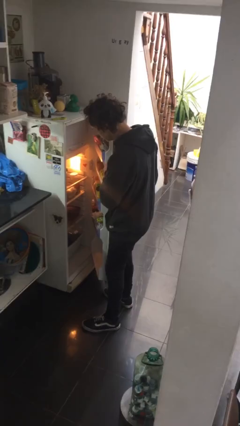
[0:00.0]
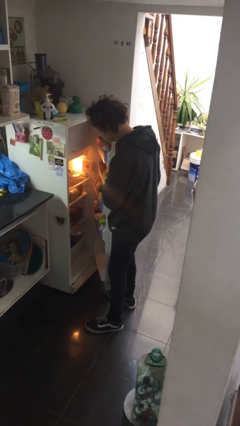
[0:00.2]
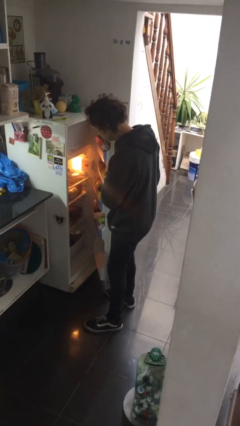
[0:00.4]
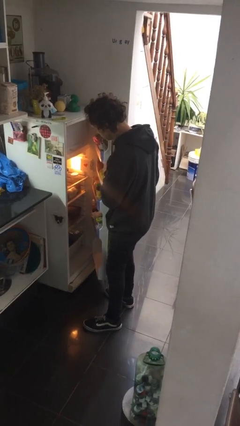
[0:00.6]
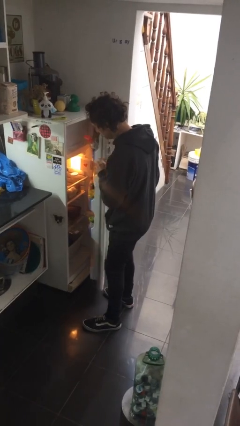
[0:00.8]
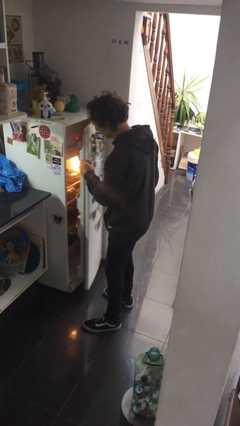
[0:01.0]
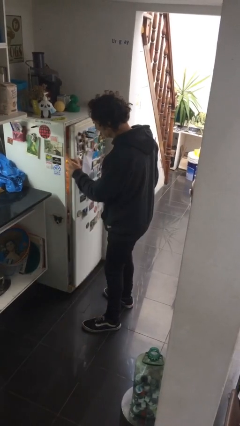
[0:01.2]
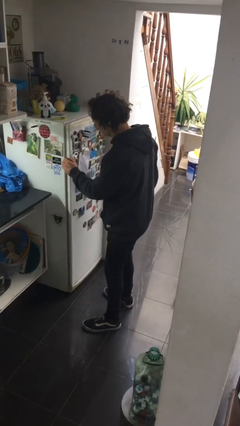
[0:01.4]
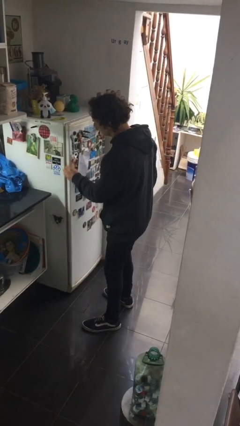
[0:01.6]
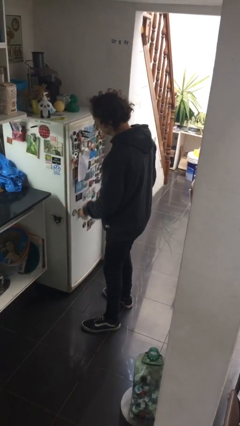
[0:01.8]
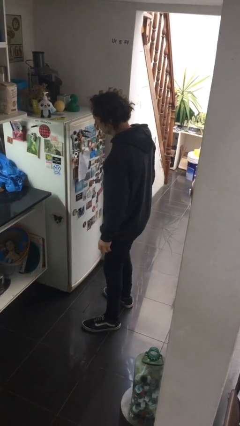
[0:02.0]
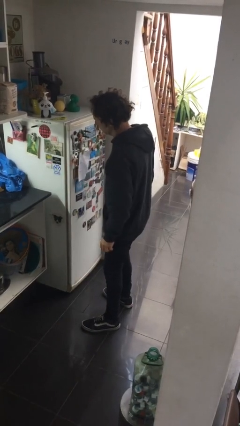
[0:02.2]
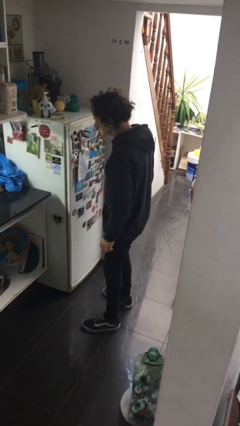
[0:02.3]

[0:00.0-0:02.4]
person closes refrigerator

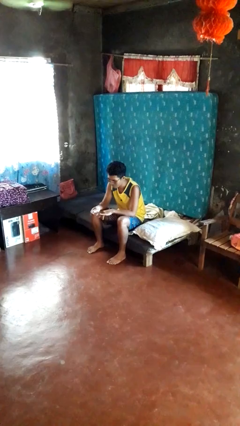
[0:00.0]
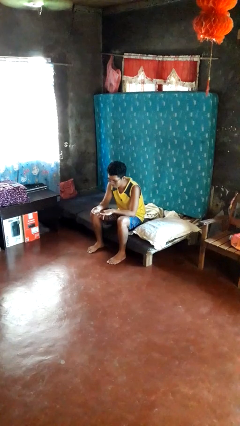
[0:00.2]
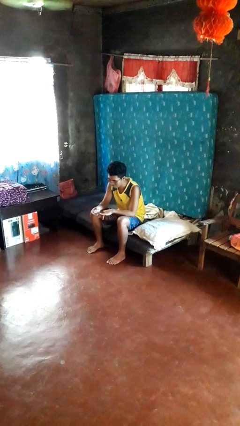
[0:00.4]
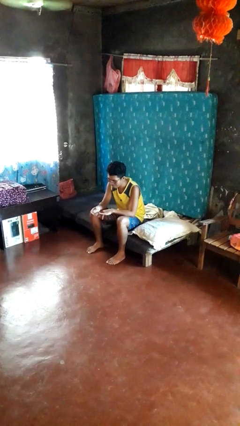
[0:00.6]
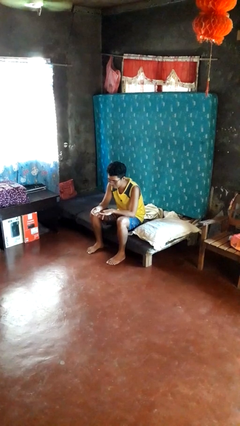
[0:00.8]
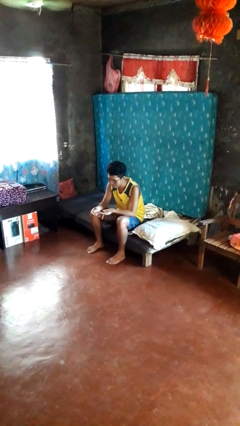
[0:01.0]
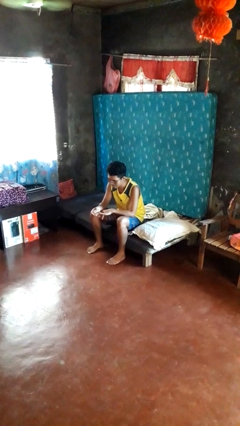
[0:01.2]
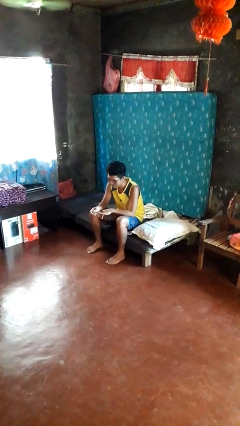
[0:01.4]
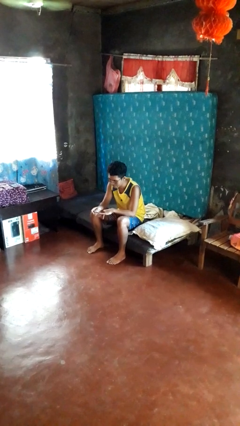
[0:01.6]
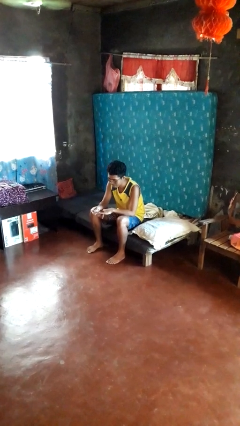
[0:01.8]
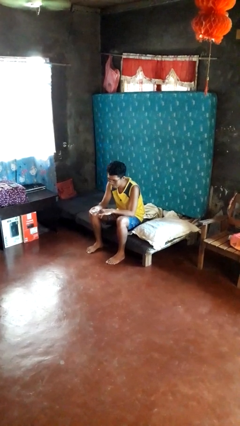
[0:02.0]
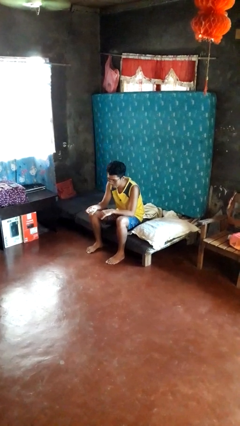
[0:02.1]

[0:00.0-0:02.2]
person clips fingernails

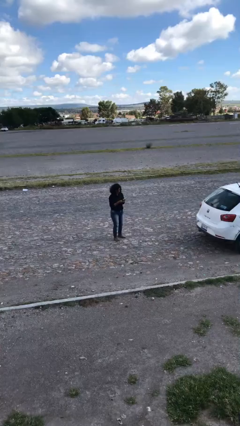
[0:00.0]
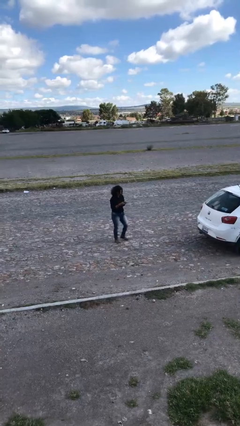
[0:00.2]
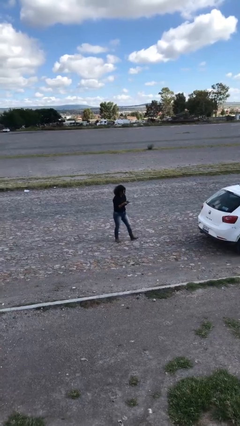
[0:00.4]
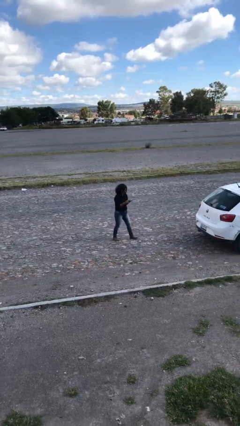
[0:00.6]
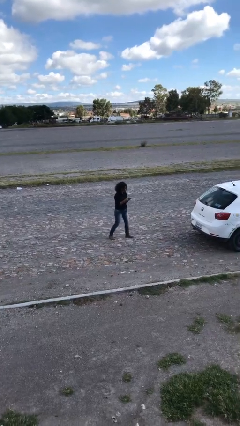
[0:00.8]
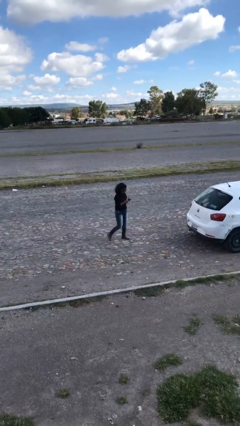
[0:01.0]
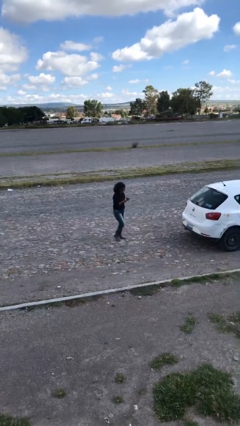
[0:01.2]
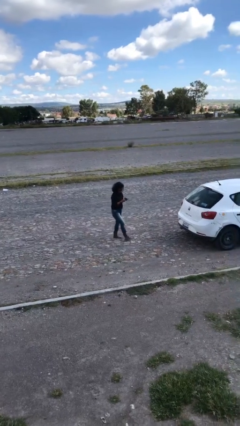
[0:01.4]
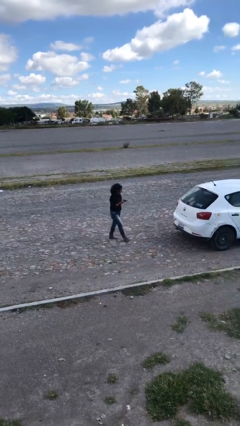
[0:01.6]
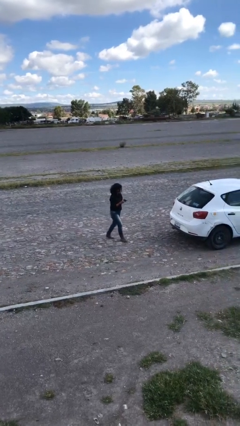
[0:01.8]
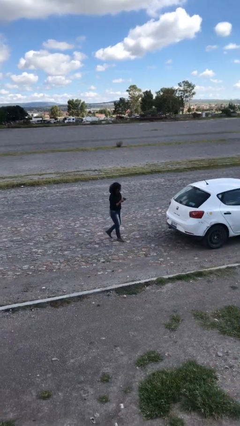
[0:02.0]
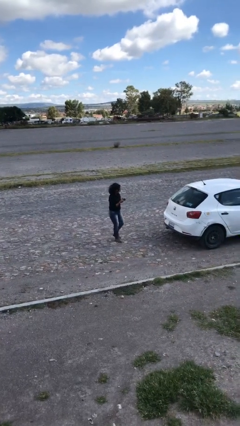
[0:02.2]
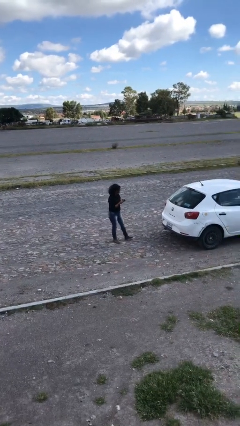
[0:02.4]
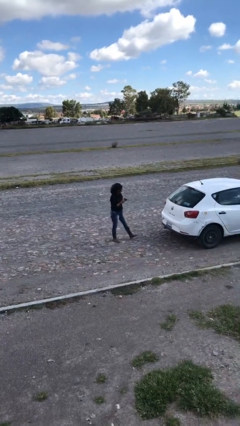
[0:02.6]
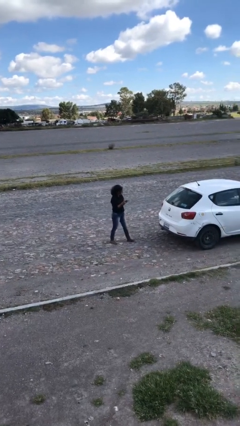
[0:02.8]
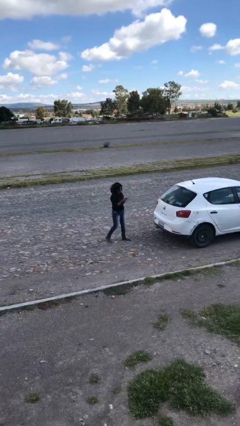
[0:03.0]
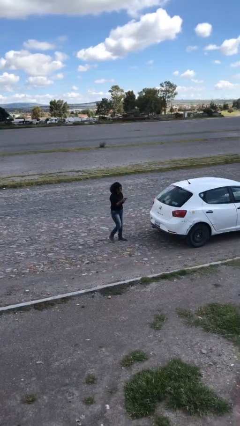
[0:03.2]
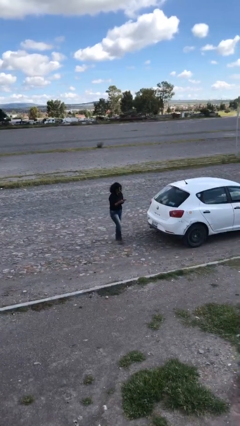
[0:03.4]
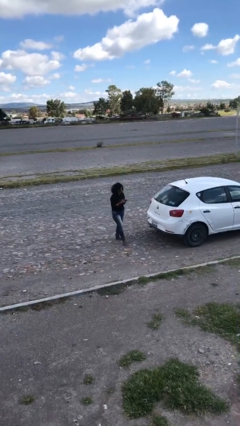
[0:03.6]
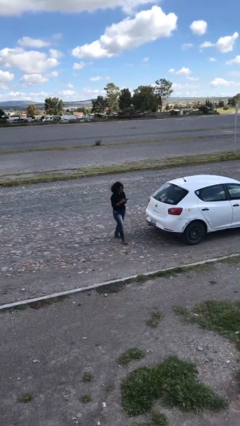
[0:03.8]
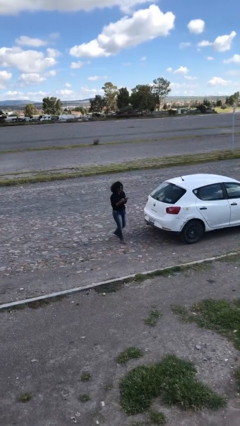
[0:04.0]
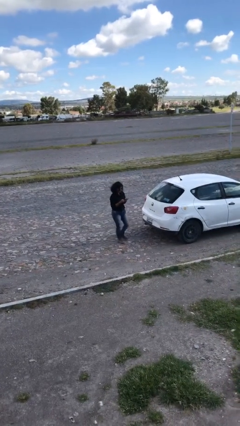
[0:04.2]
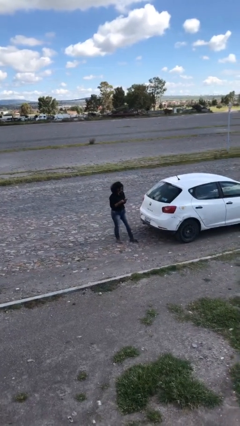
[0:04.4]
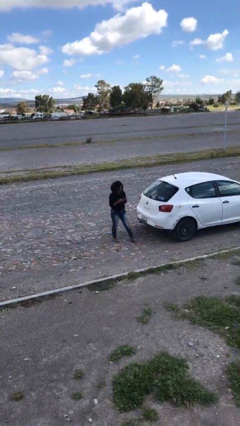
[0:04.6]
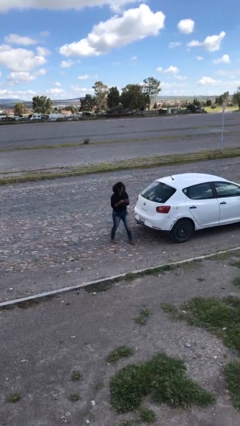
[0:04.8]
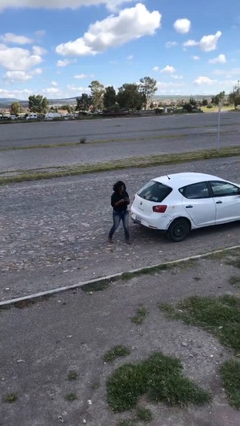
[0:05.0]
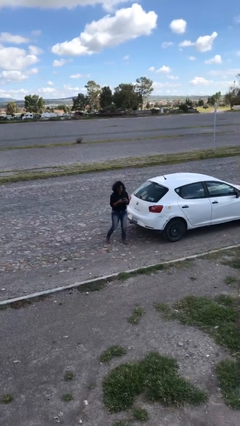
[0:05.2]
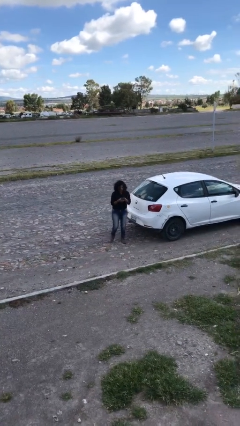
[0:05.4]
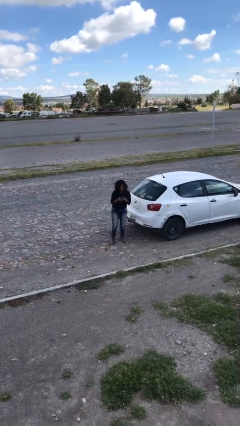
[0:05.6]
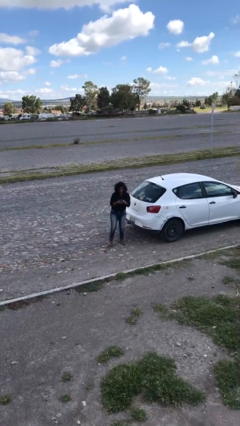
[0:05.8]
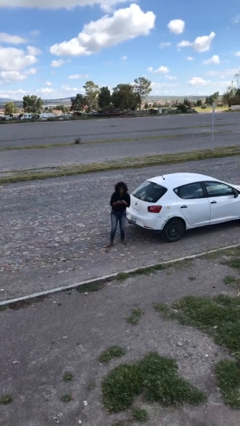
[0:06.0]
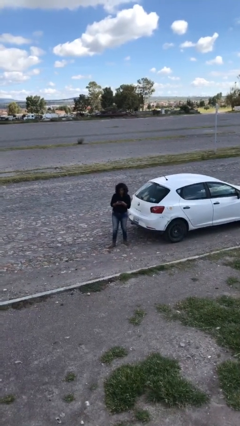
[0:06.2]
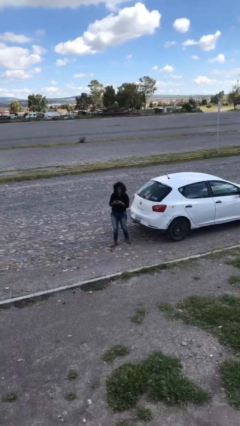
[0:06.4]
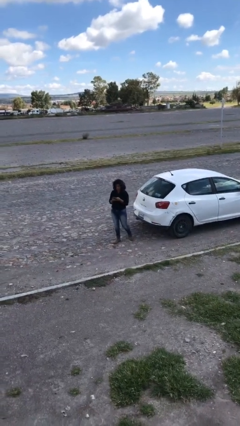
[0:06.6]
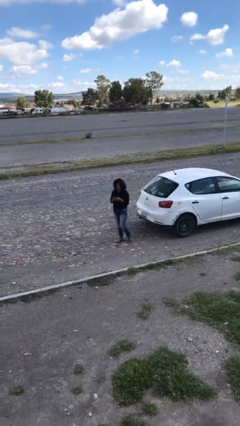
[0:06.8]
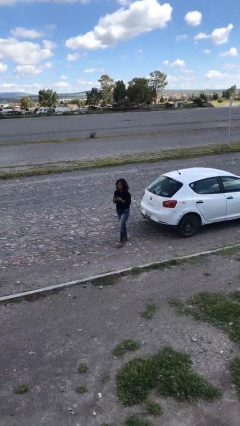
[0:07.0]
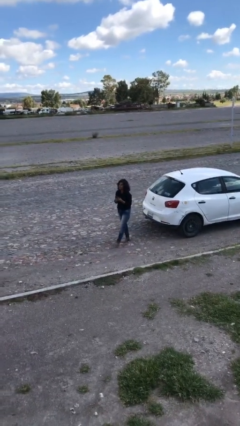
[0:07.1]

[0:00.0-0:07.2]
person texts on phone

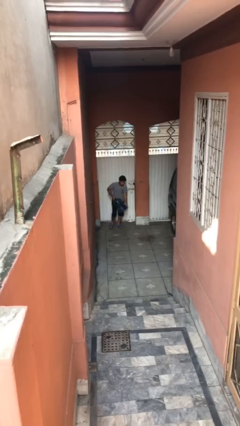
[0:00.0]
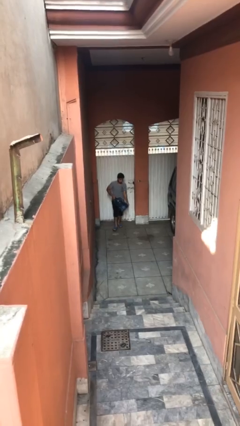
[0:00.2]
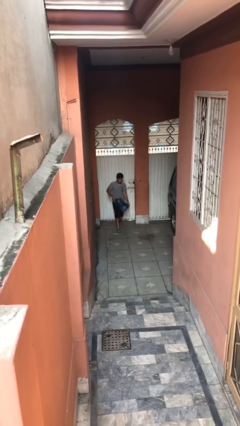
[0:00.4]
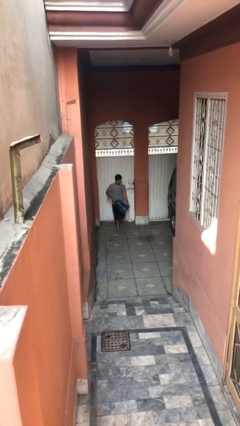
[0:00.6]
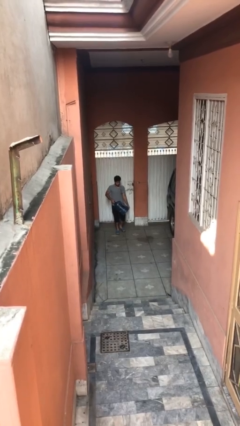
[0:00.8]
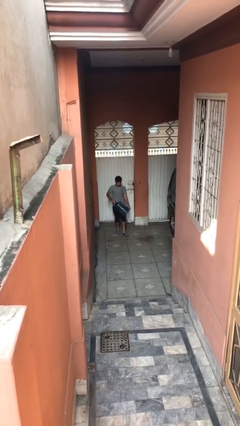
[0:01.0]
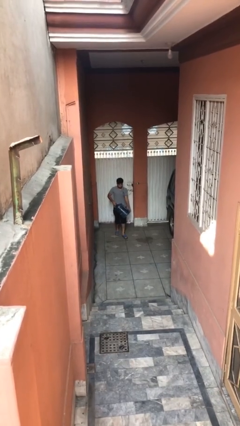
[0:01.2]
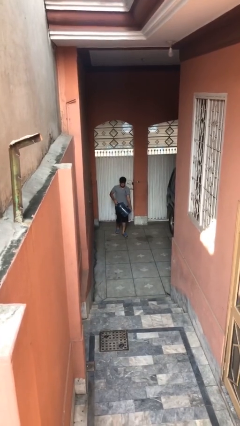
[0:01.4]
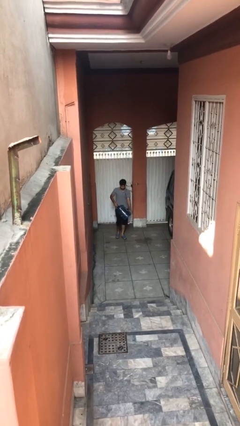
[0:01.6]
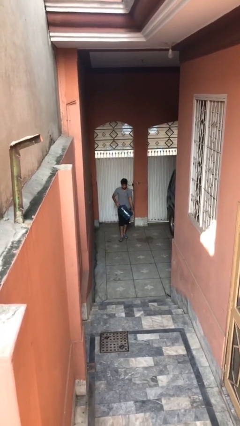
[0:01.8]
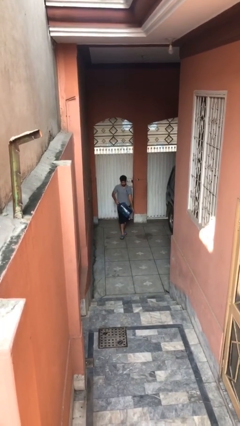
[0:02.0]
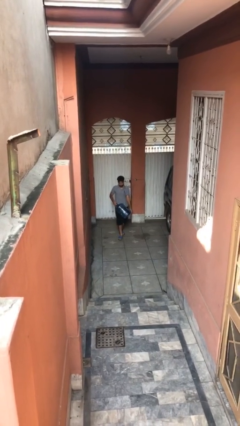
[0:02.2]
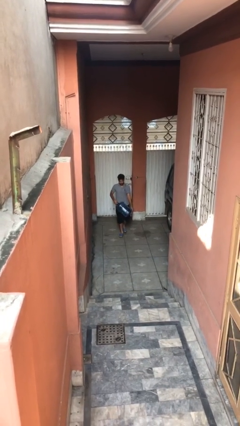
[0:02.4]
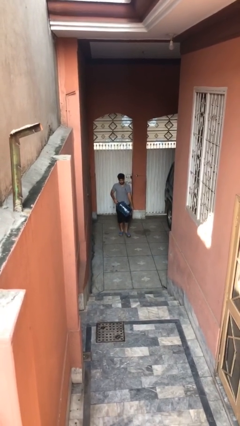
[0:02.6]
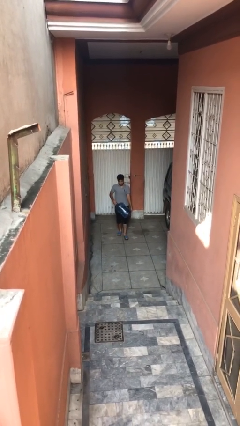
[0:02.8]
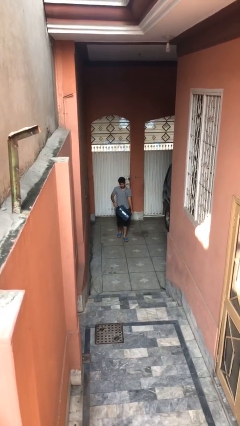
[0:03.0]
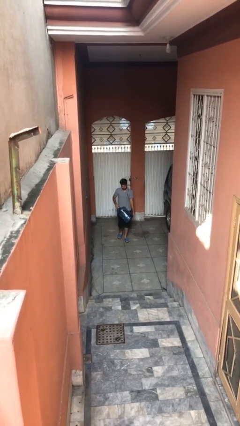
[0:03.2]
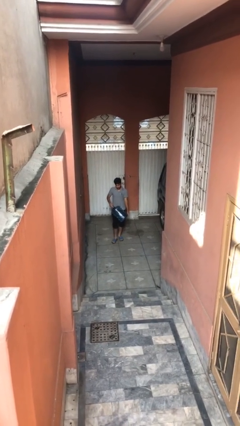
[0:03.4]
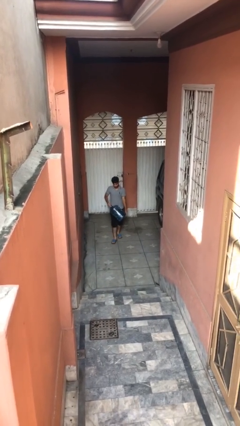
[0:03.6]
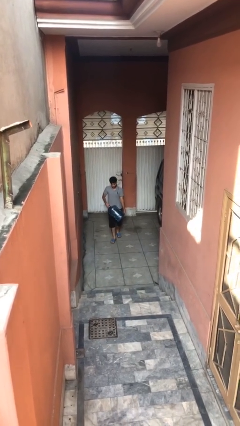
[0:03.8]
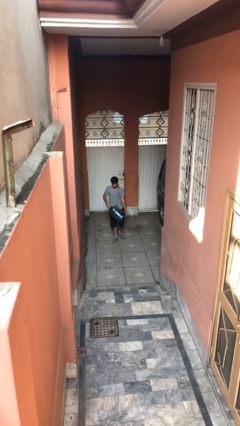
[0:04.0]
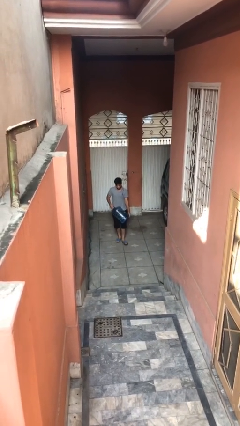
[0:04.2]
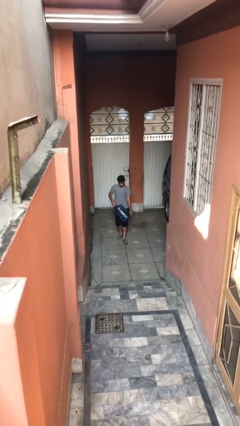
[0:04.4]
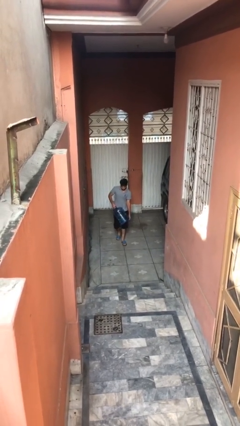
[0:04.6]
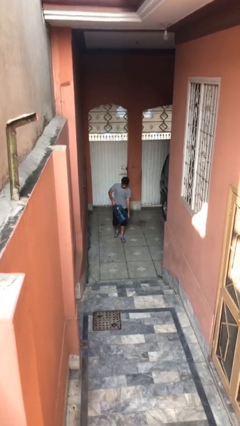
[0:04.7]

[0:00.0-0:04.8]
person carries heavy object

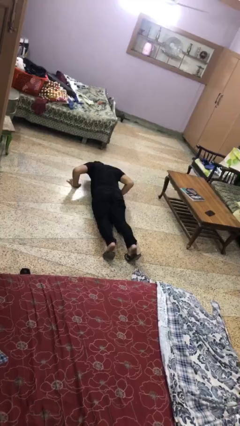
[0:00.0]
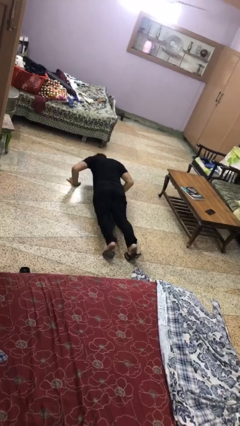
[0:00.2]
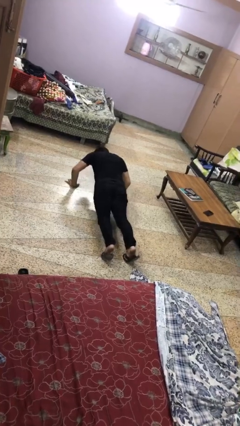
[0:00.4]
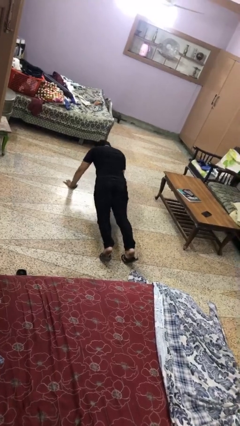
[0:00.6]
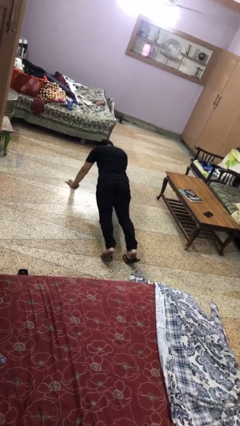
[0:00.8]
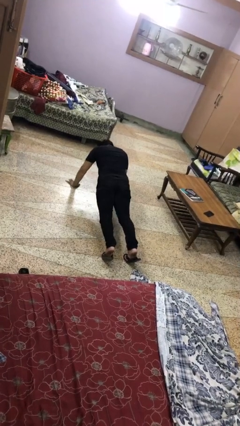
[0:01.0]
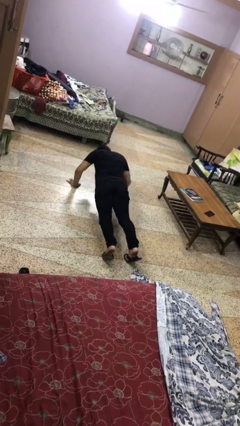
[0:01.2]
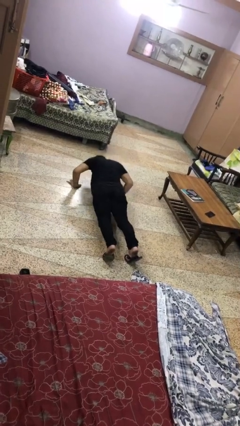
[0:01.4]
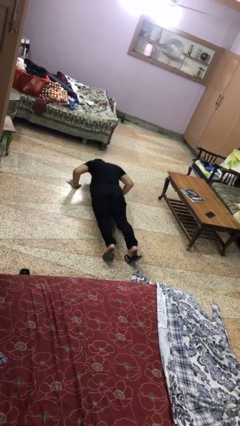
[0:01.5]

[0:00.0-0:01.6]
person exercises with pushup
